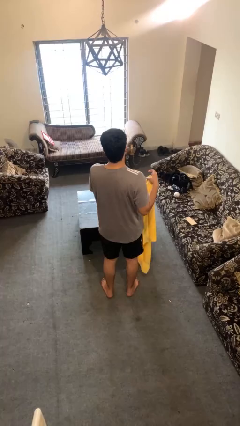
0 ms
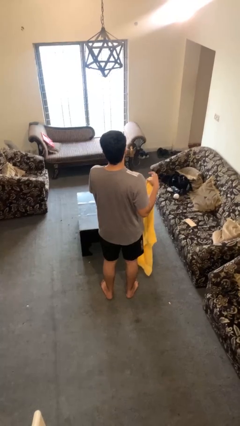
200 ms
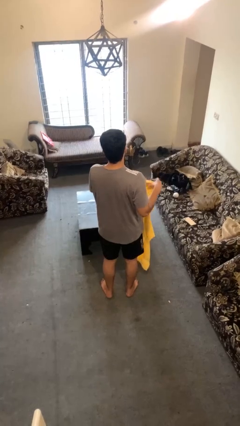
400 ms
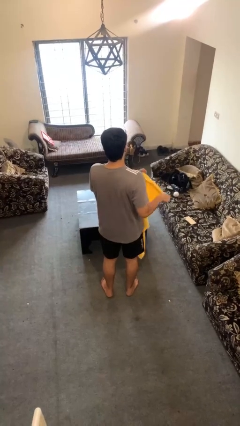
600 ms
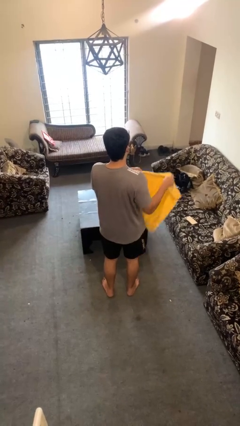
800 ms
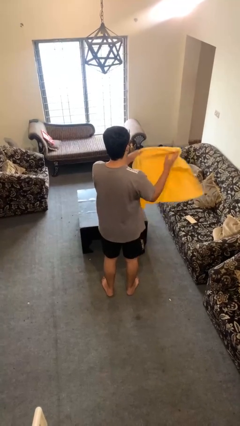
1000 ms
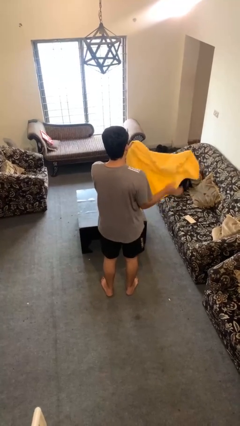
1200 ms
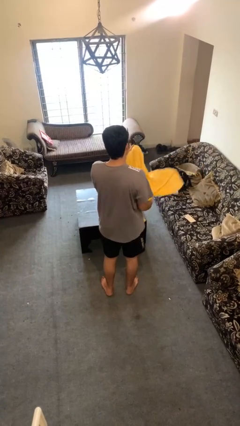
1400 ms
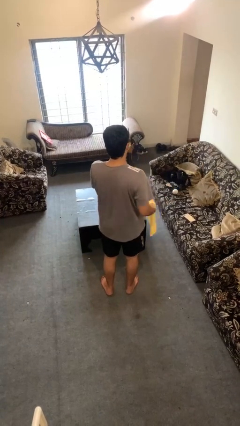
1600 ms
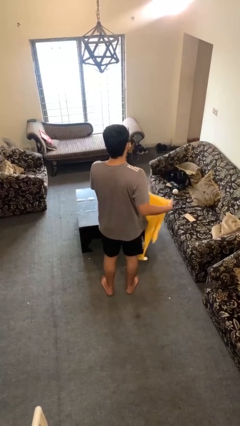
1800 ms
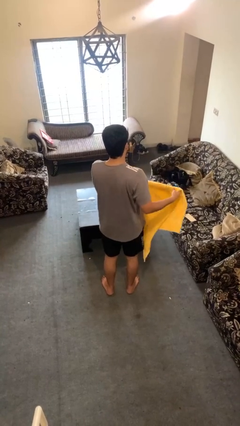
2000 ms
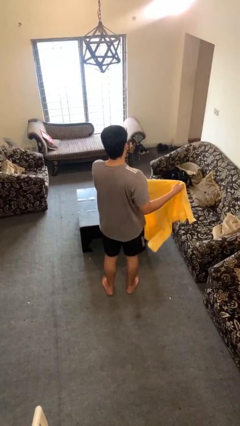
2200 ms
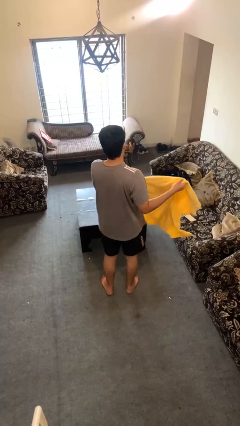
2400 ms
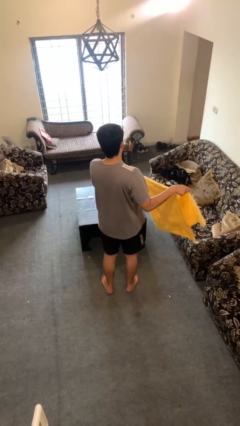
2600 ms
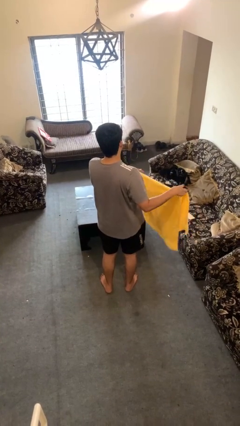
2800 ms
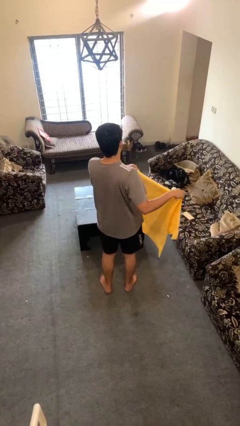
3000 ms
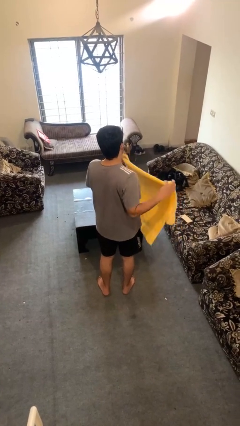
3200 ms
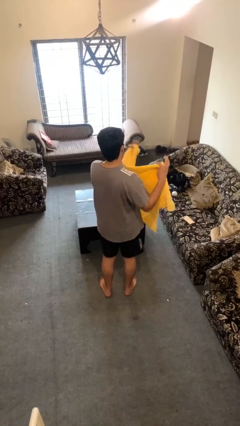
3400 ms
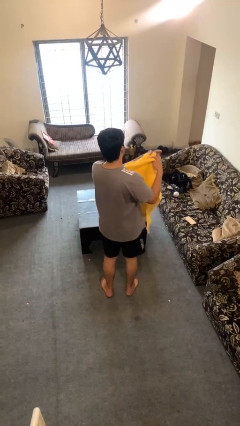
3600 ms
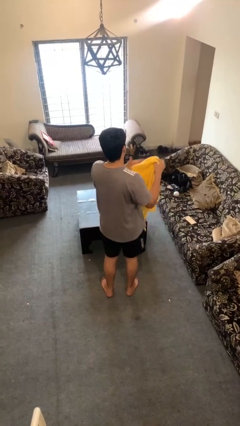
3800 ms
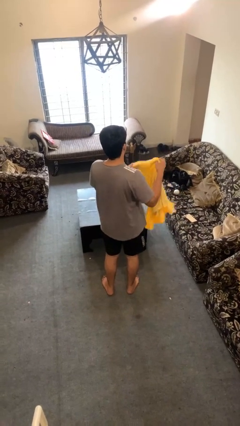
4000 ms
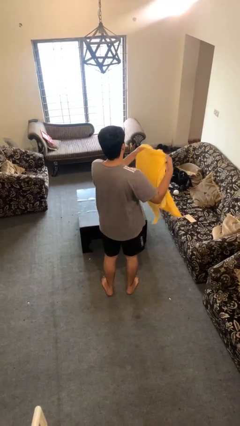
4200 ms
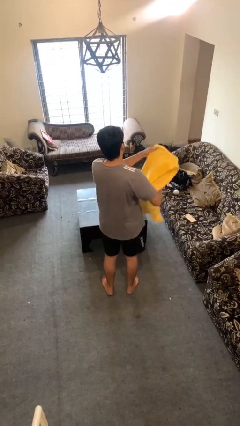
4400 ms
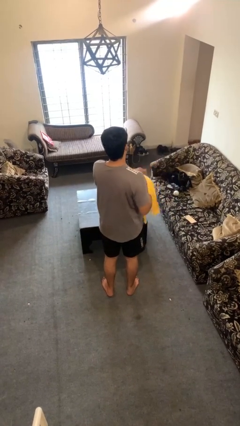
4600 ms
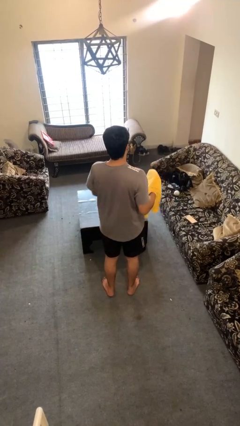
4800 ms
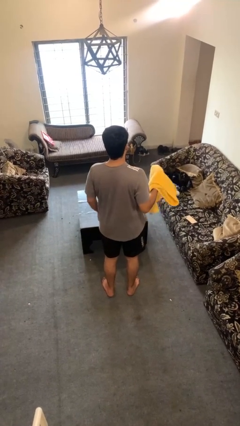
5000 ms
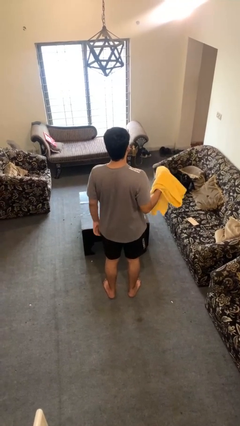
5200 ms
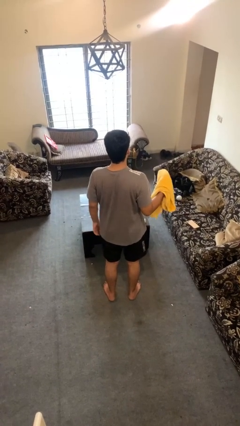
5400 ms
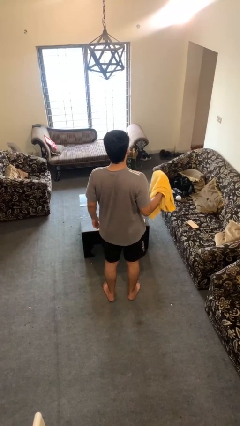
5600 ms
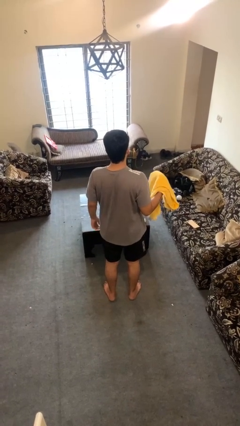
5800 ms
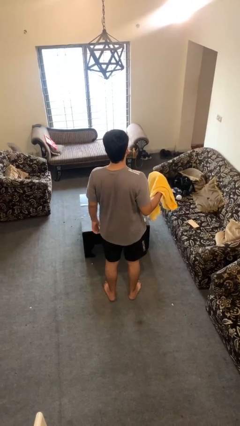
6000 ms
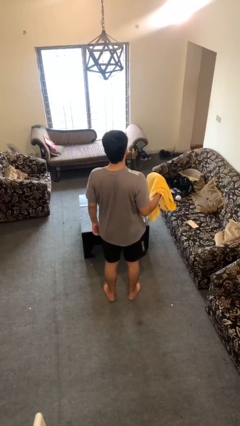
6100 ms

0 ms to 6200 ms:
person folds towel

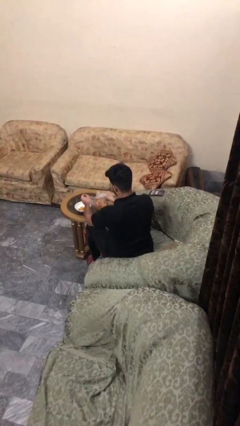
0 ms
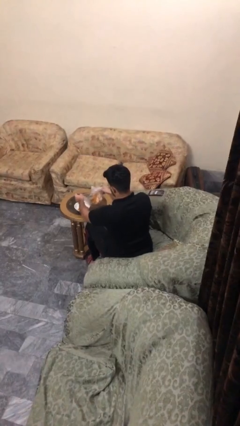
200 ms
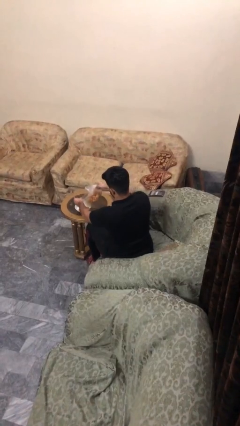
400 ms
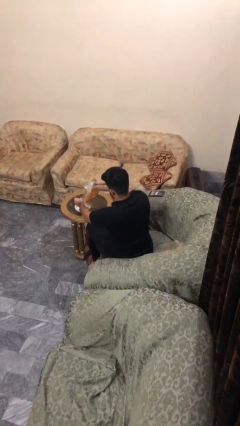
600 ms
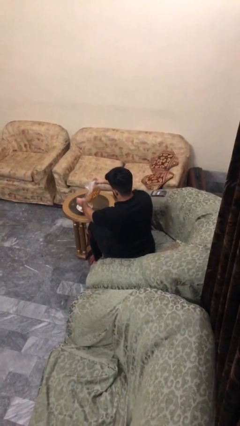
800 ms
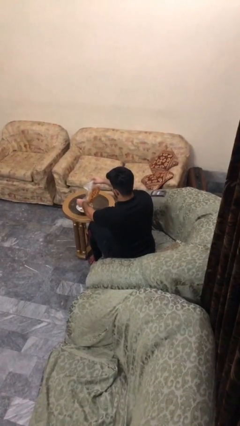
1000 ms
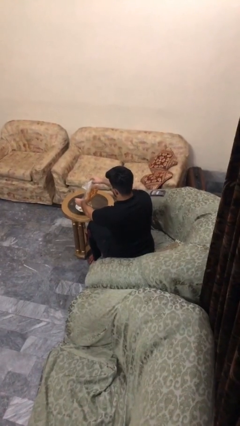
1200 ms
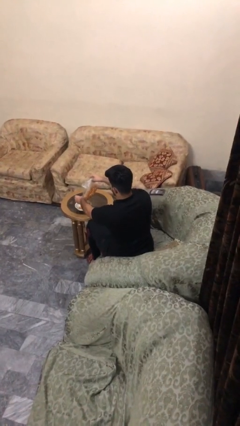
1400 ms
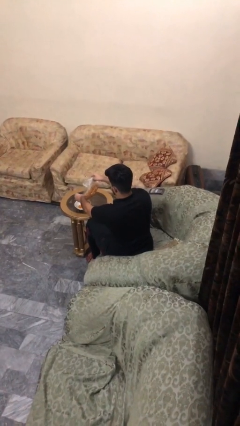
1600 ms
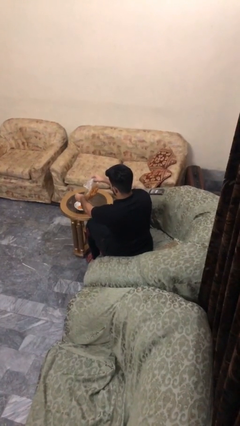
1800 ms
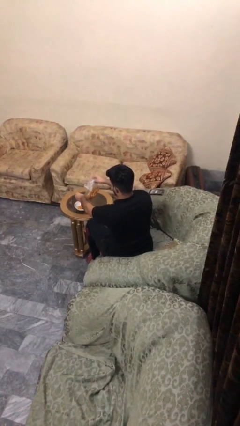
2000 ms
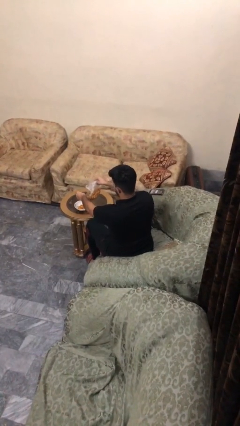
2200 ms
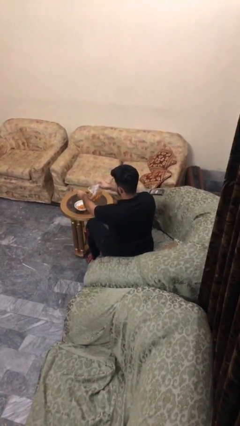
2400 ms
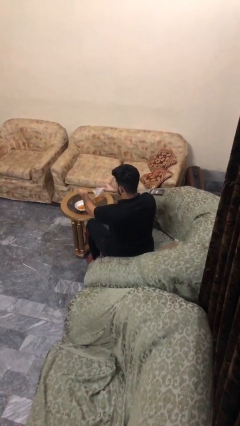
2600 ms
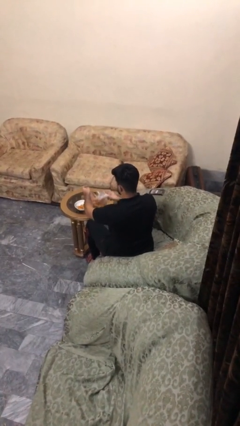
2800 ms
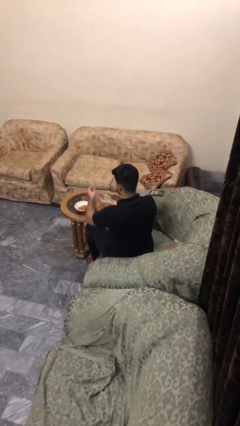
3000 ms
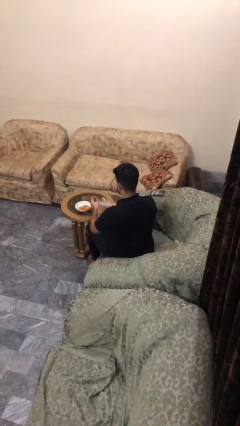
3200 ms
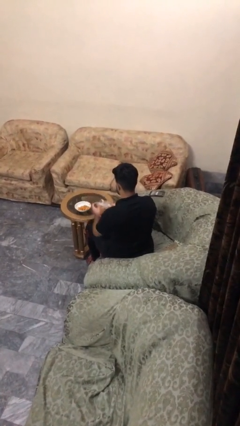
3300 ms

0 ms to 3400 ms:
person pours into bowl

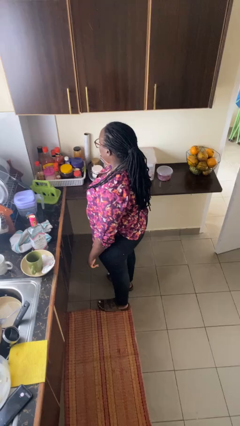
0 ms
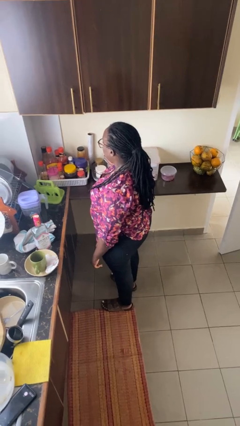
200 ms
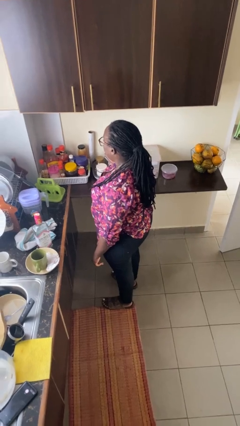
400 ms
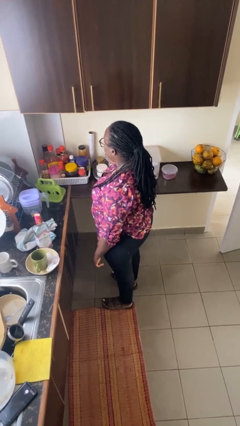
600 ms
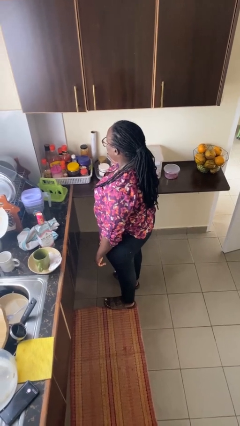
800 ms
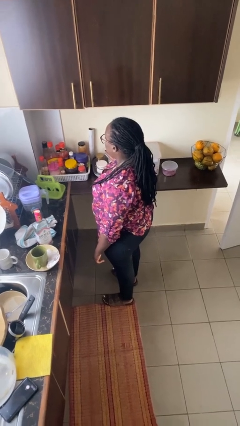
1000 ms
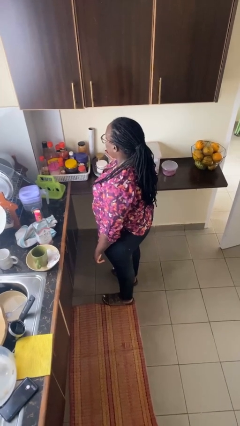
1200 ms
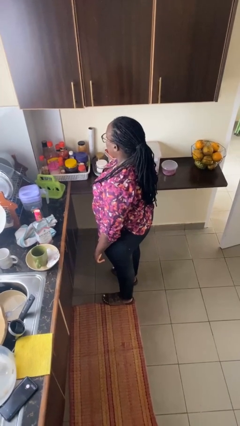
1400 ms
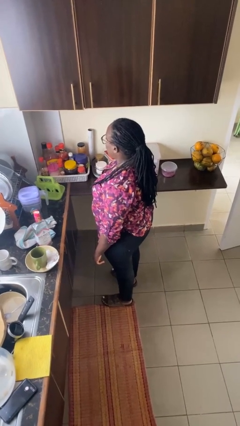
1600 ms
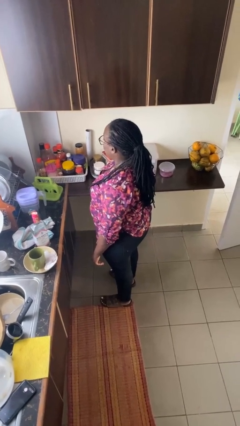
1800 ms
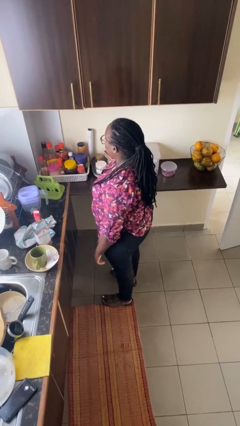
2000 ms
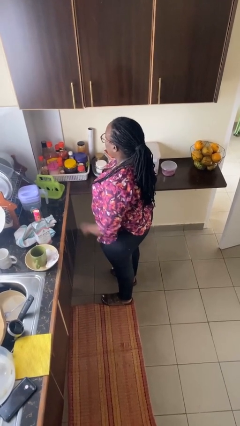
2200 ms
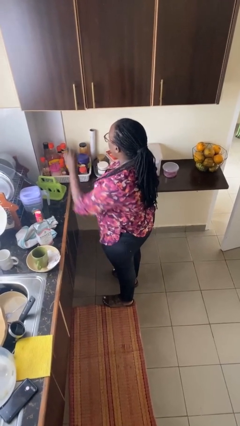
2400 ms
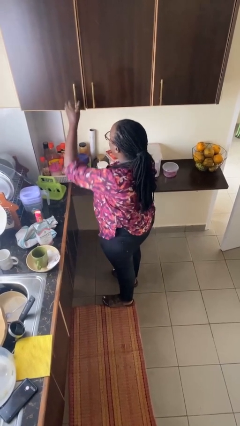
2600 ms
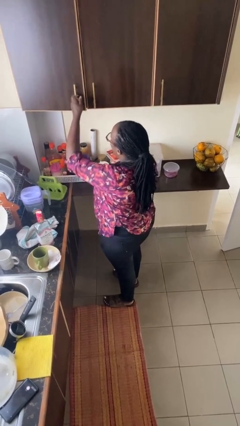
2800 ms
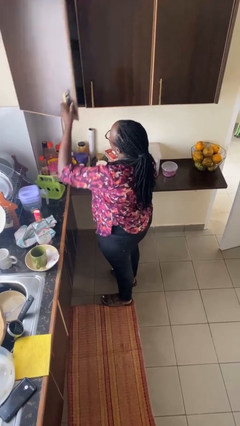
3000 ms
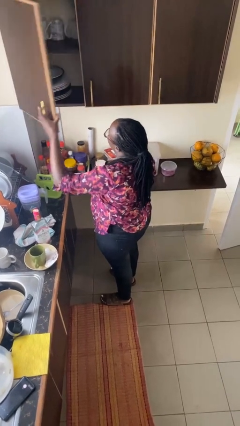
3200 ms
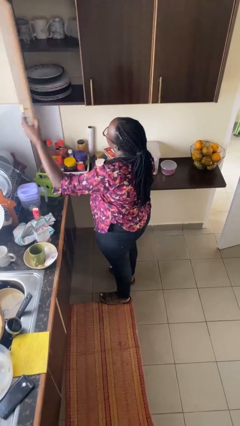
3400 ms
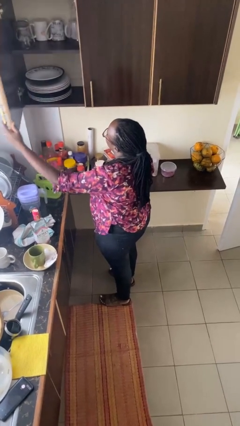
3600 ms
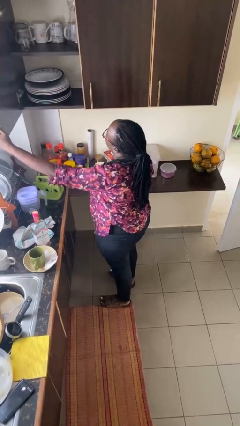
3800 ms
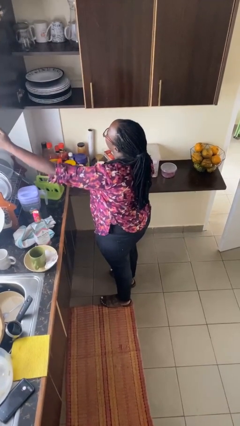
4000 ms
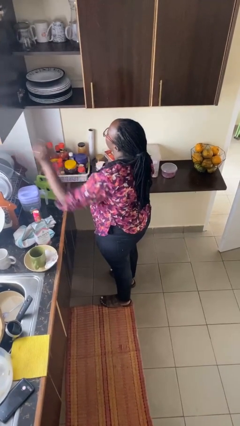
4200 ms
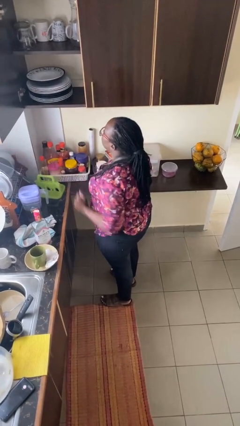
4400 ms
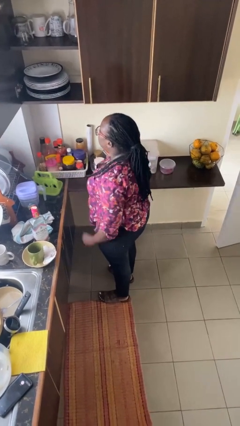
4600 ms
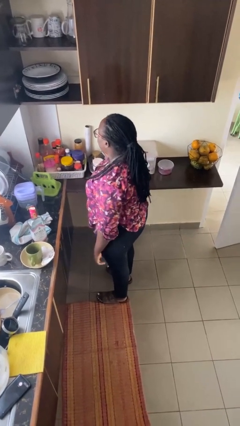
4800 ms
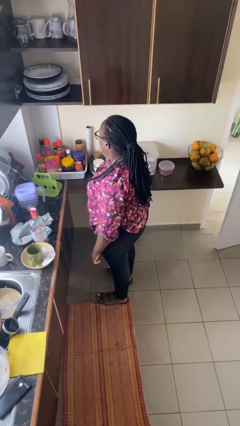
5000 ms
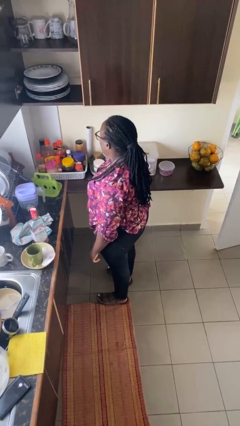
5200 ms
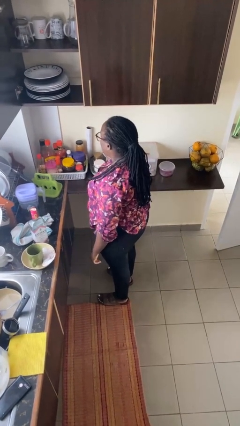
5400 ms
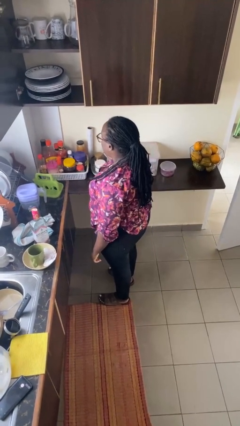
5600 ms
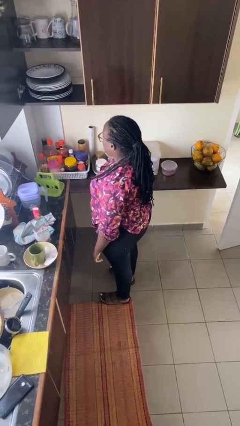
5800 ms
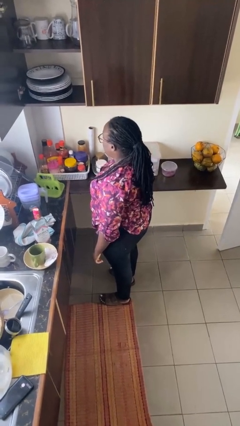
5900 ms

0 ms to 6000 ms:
person opens cabinet

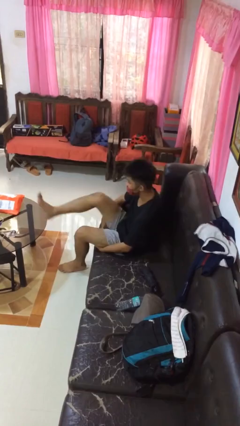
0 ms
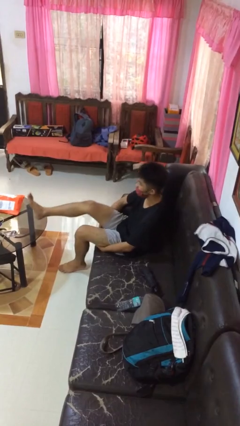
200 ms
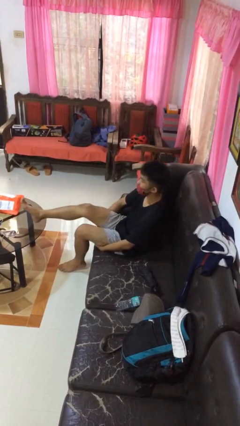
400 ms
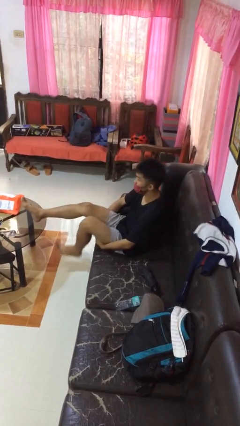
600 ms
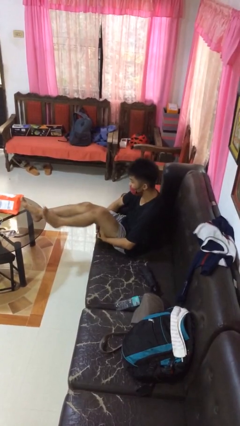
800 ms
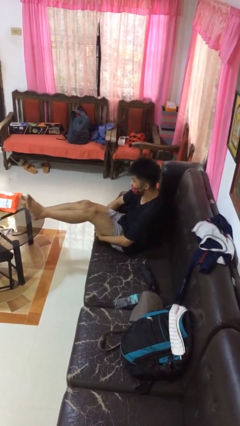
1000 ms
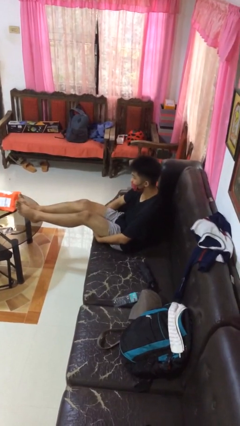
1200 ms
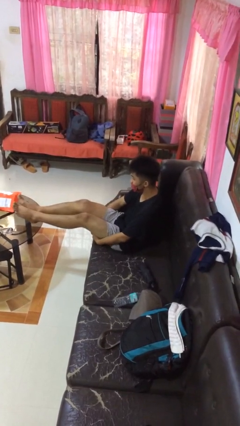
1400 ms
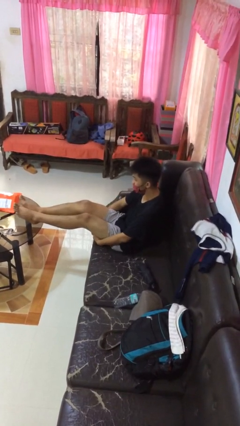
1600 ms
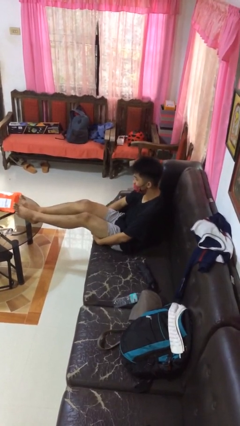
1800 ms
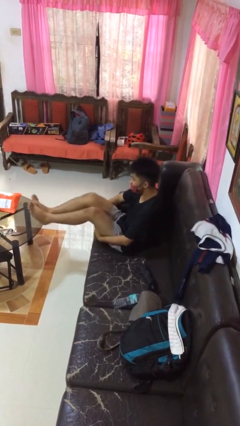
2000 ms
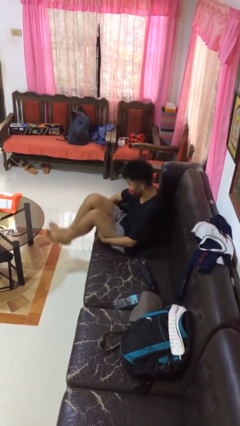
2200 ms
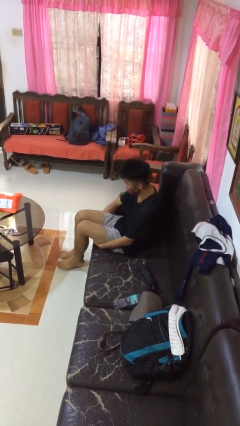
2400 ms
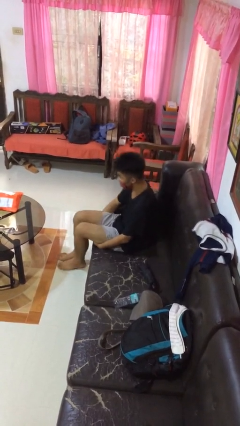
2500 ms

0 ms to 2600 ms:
person puts feet up
